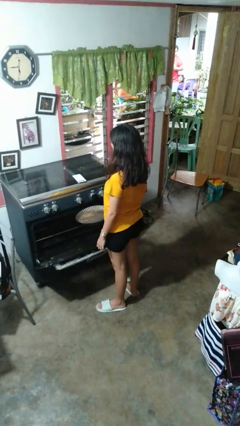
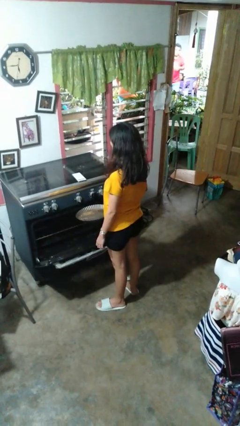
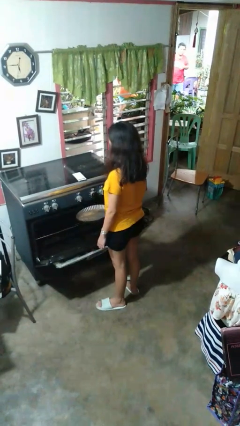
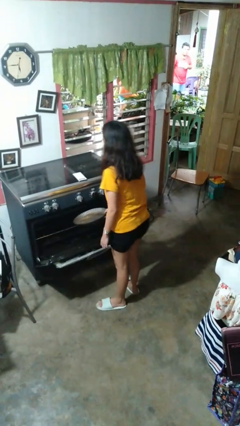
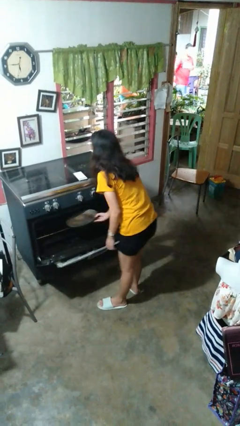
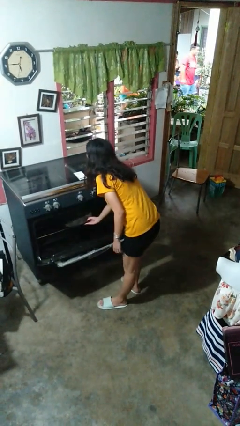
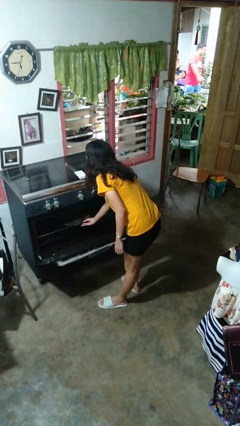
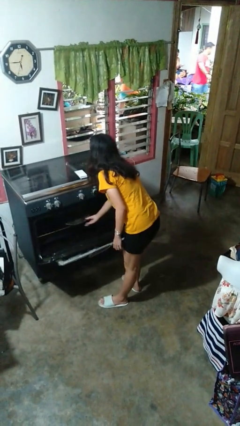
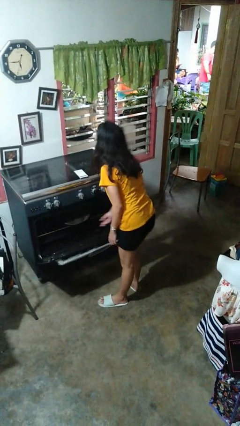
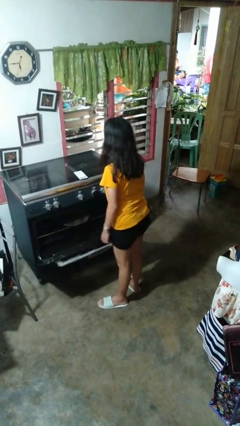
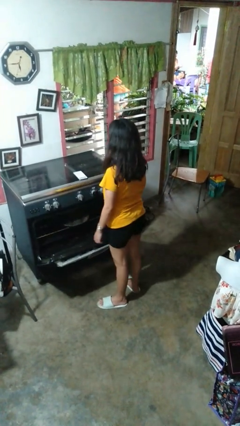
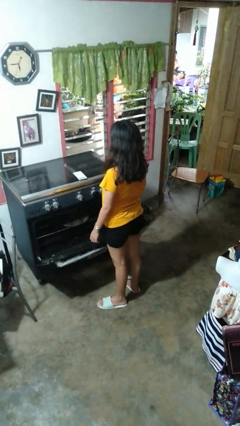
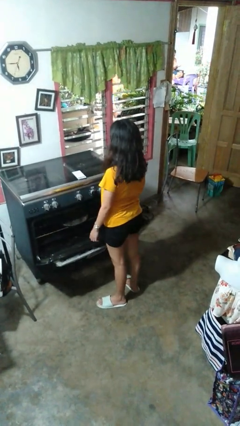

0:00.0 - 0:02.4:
person puts object into oven

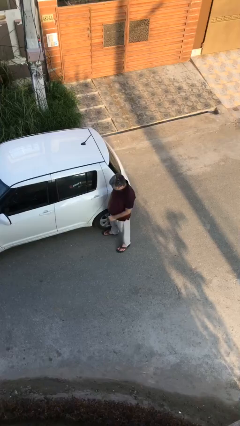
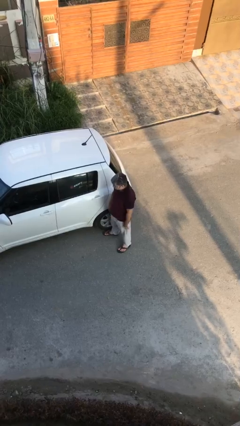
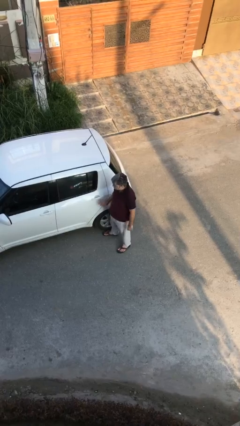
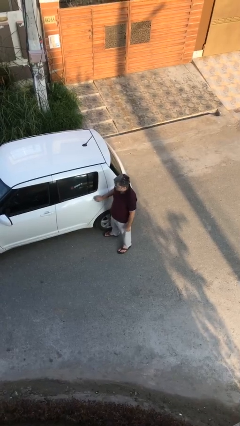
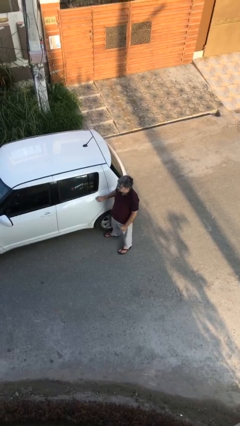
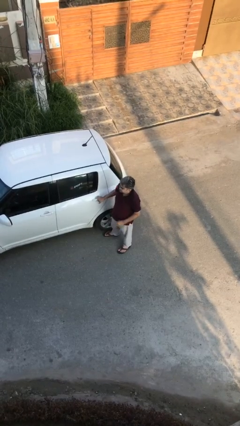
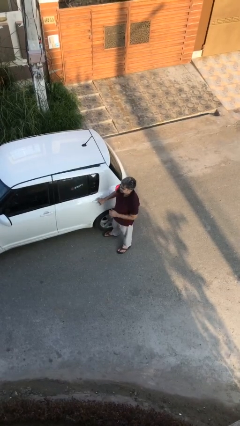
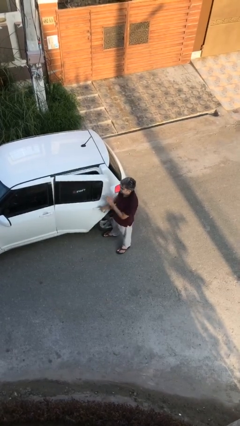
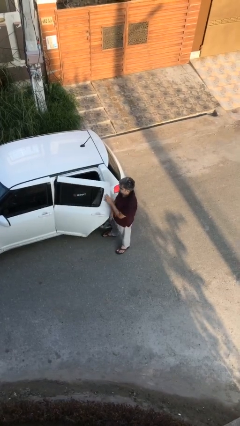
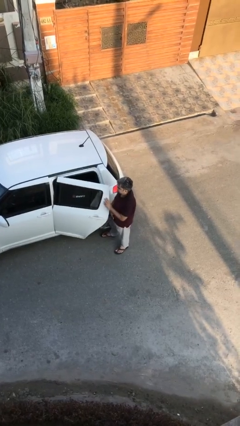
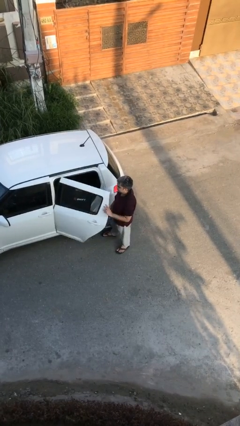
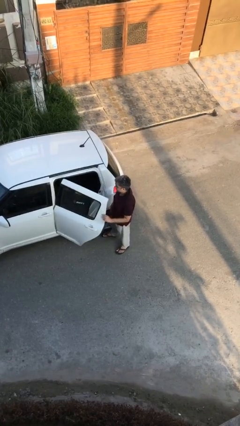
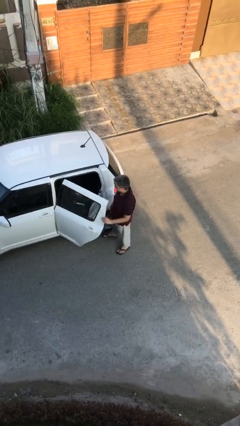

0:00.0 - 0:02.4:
person opens car door

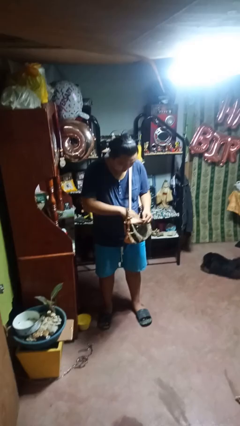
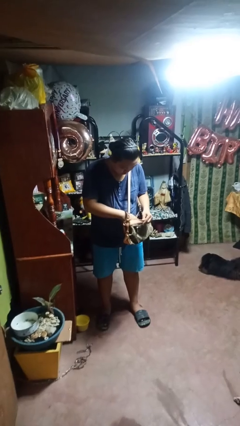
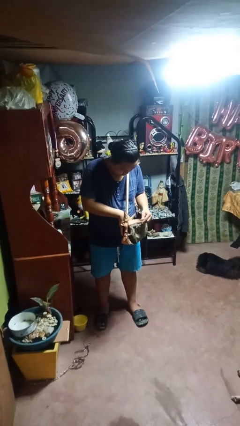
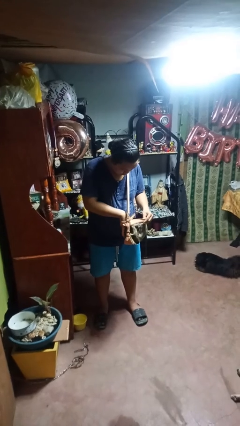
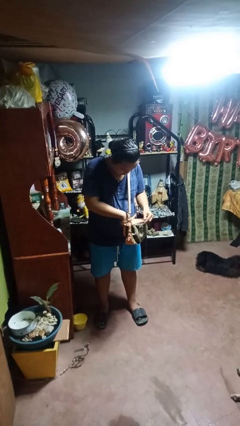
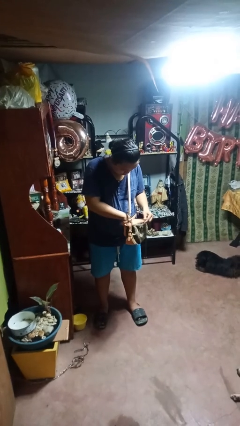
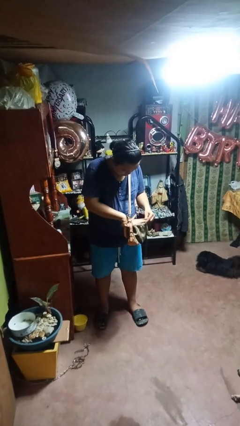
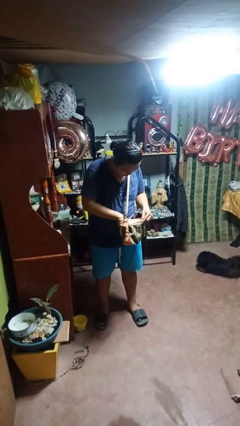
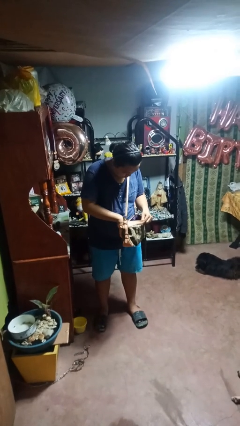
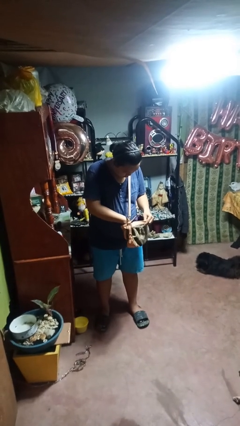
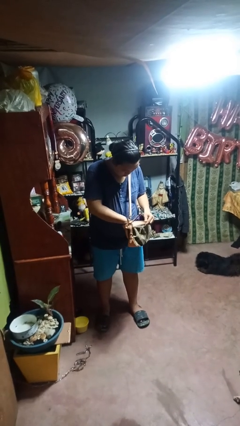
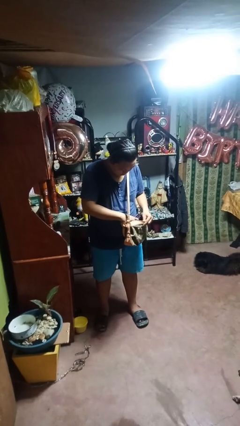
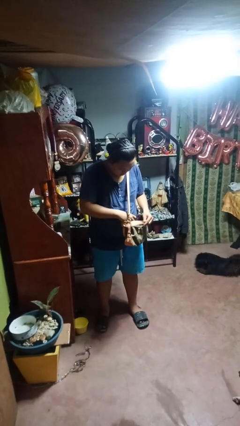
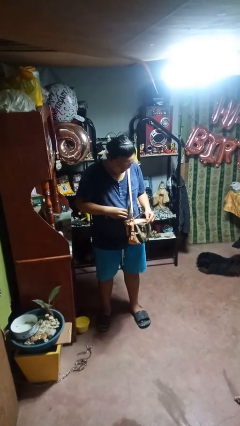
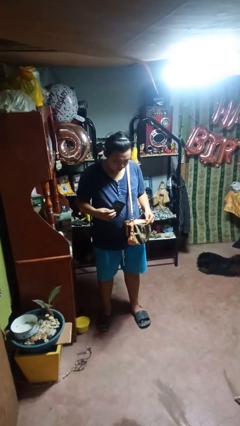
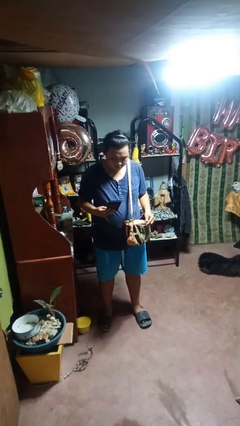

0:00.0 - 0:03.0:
person searches in purse

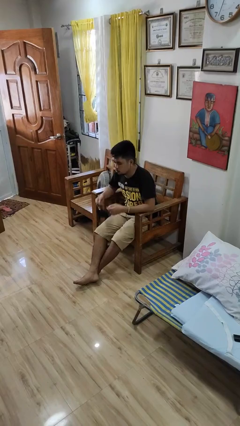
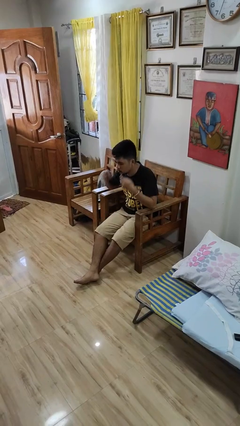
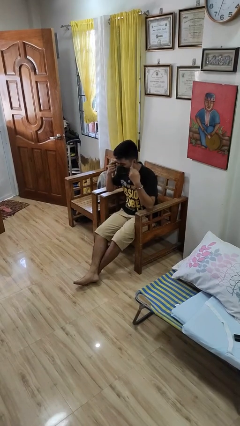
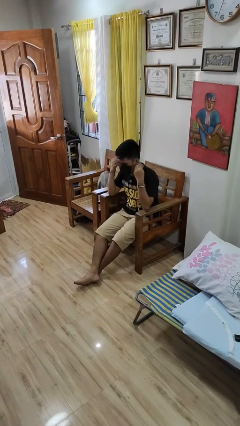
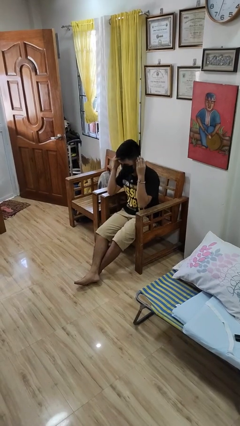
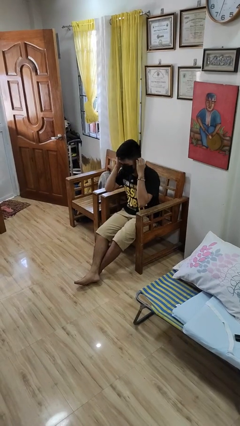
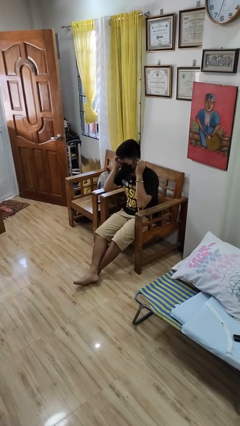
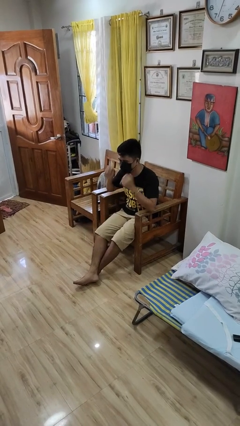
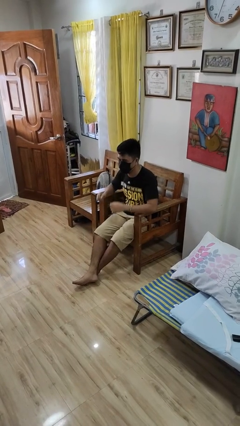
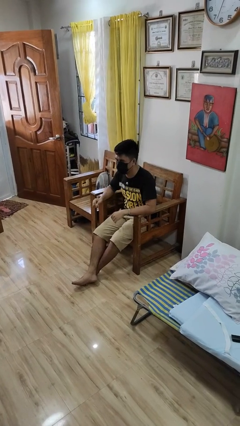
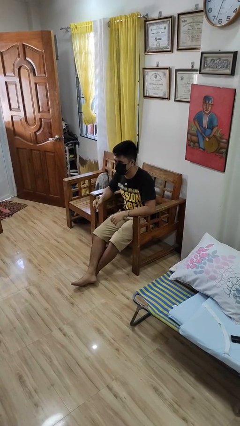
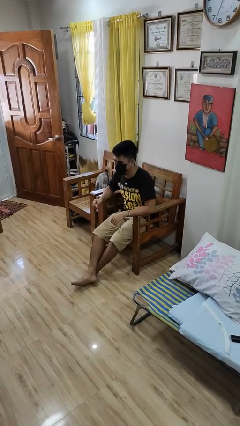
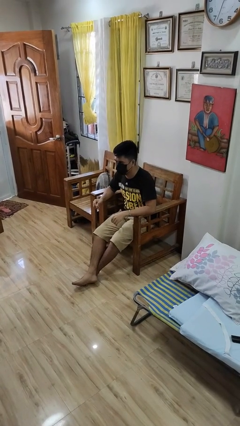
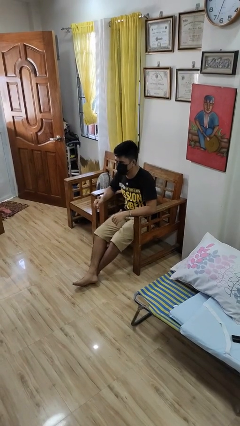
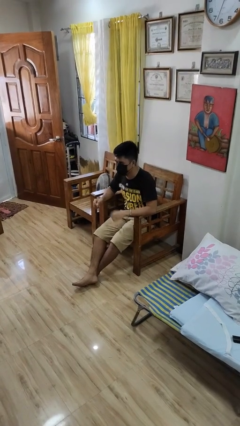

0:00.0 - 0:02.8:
person puts on facemask

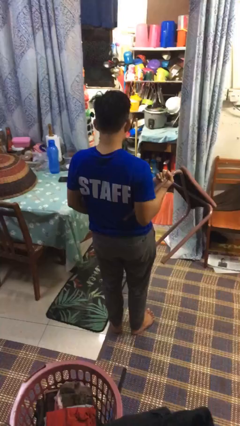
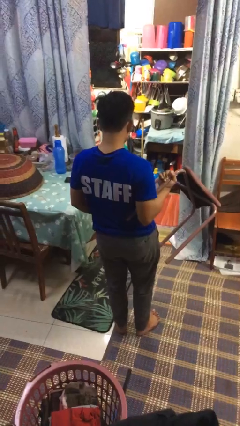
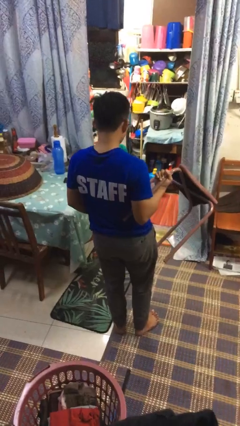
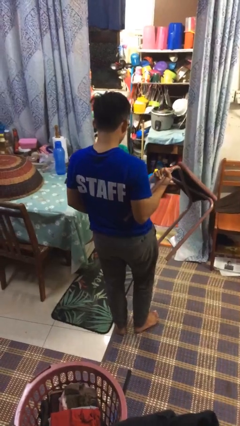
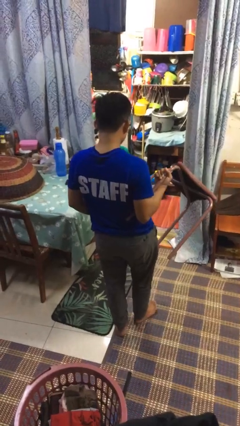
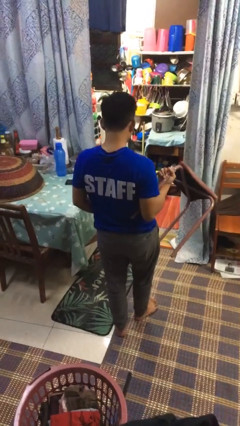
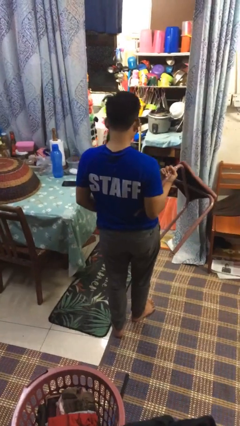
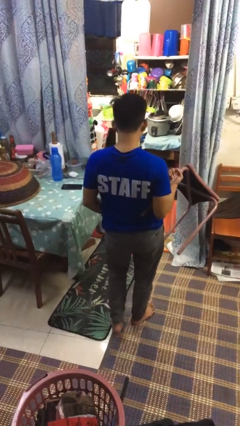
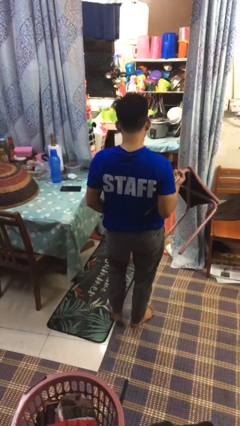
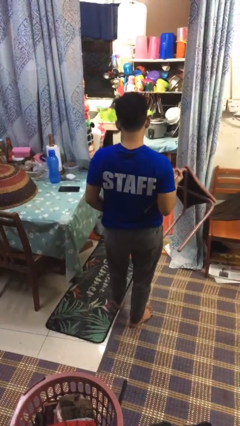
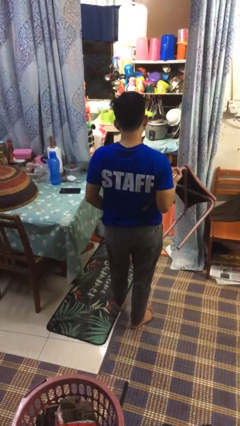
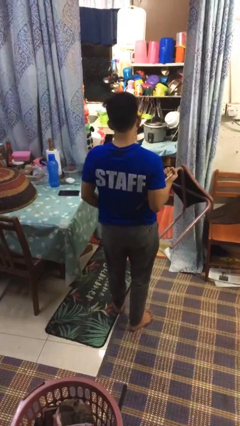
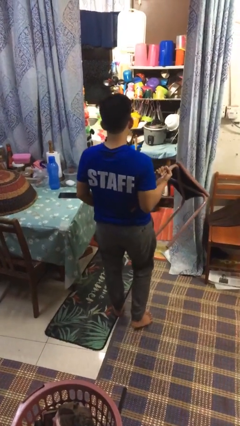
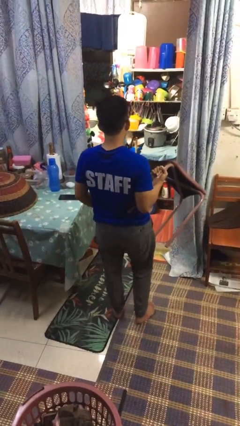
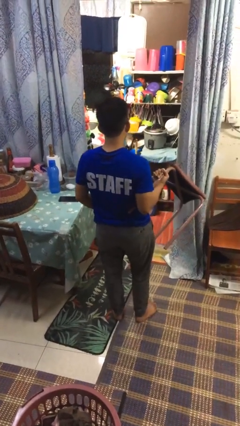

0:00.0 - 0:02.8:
person carries furniture

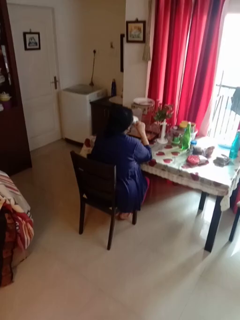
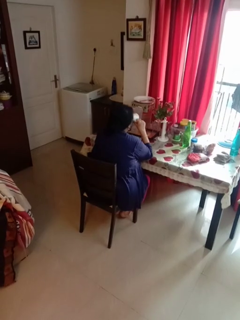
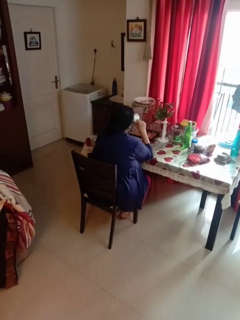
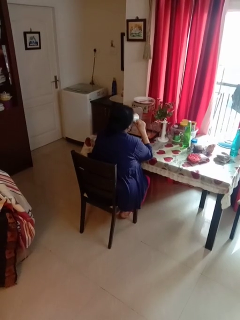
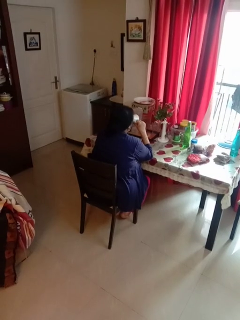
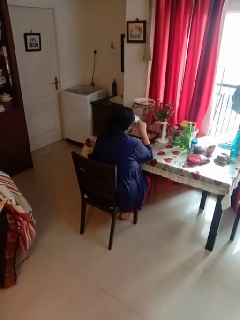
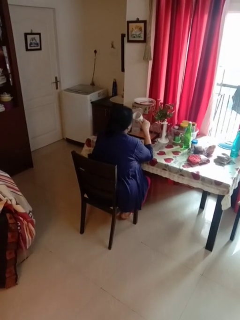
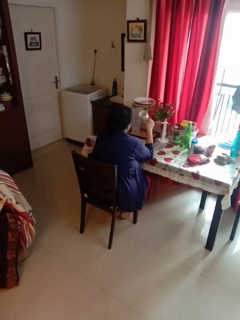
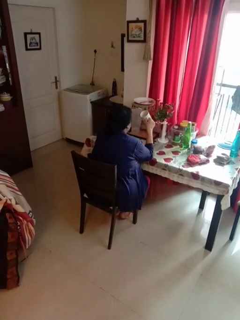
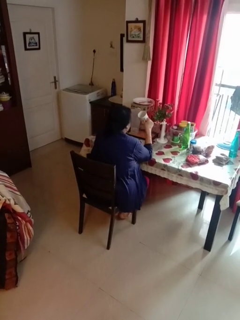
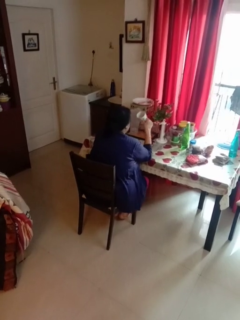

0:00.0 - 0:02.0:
person drinks from mug

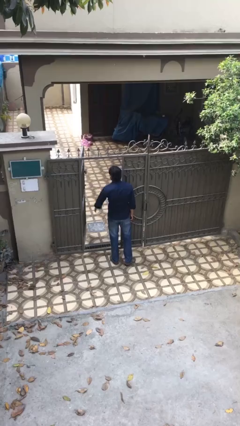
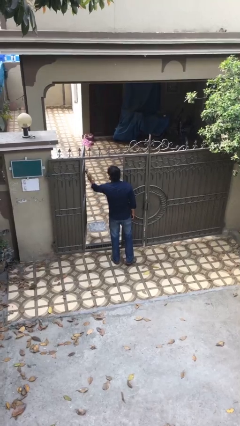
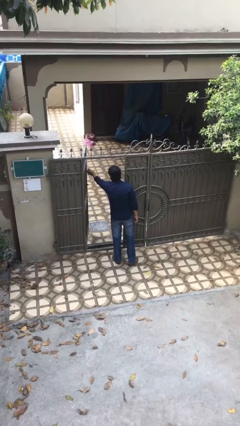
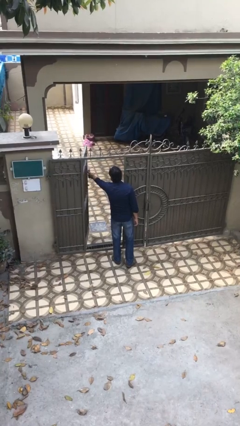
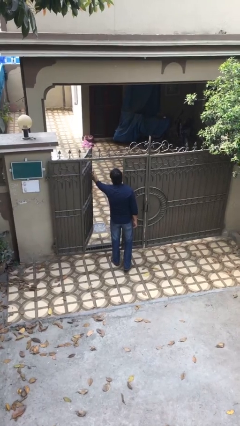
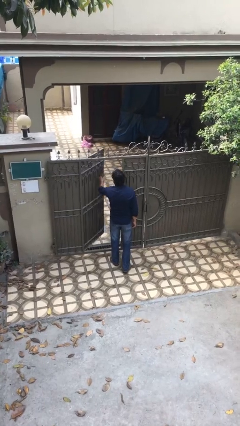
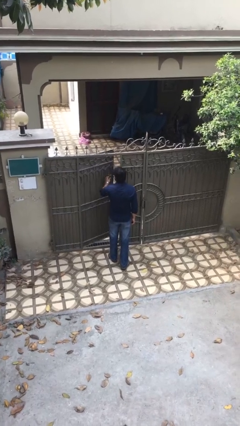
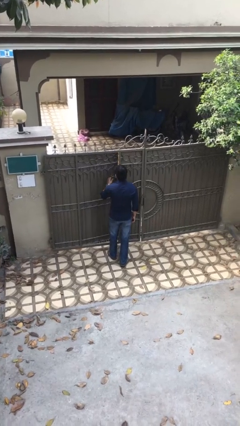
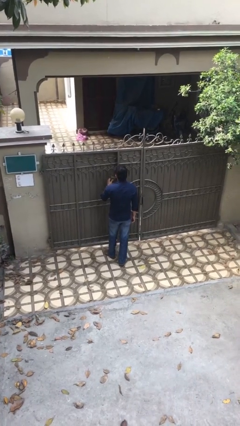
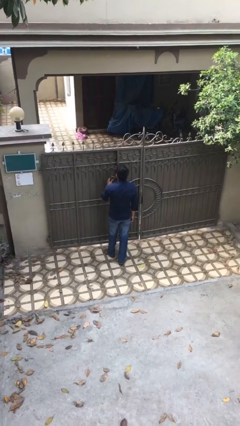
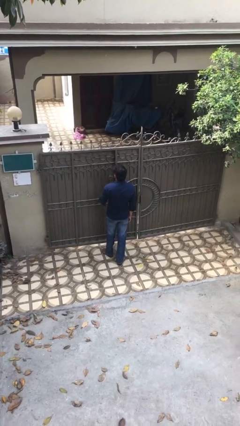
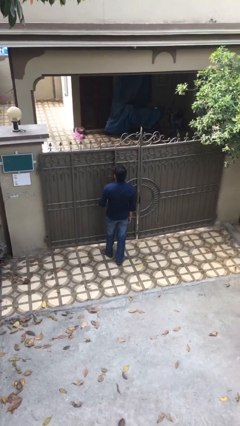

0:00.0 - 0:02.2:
person closes facility door

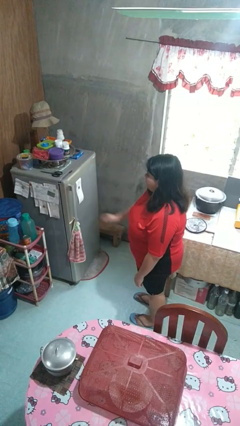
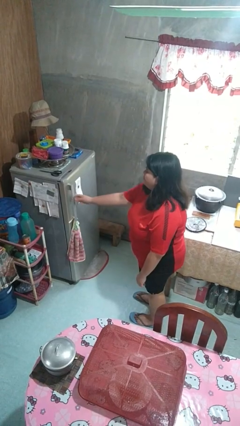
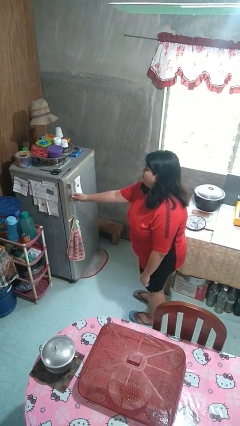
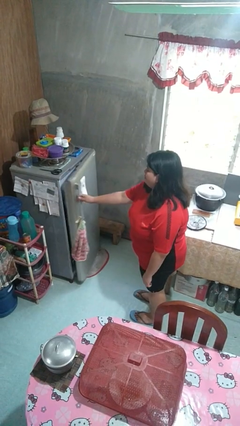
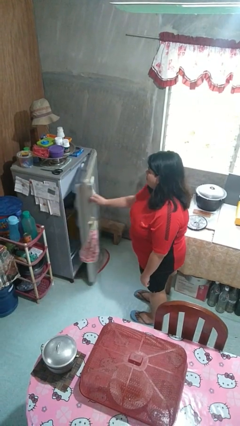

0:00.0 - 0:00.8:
person opens refrigerator
